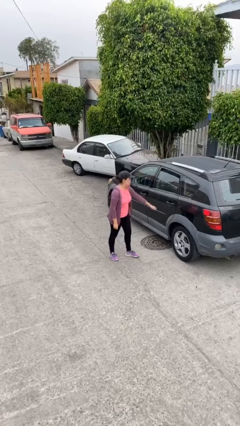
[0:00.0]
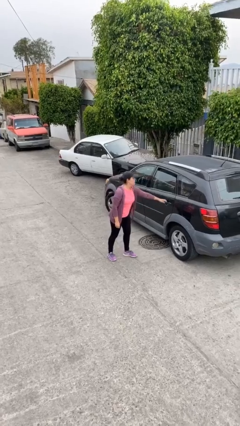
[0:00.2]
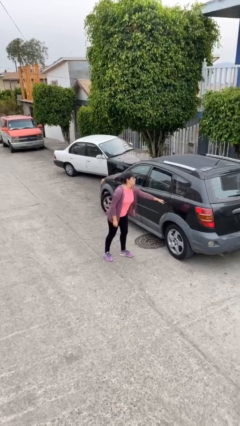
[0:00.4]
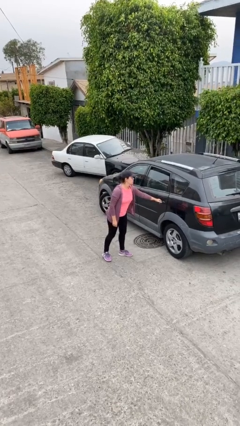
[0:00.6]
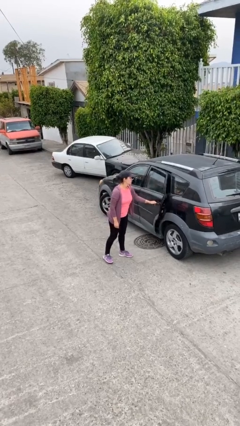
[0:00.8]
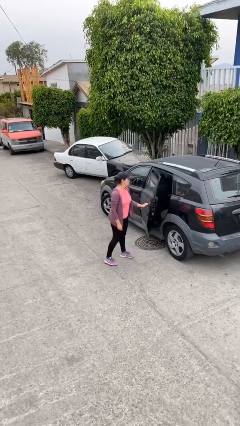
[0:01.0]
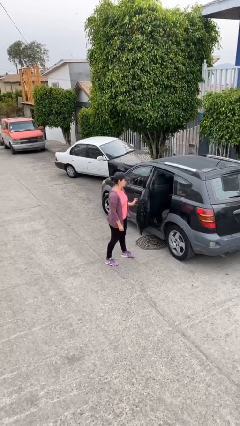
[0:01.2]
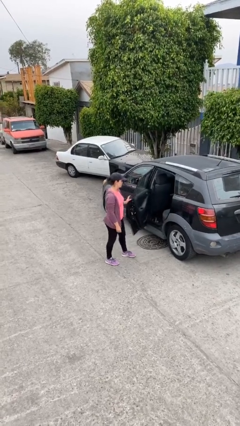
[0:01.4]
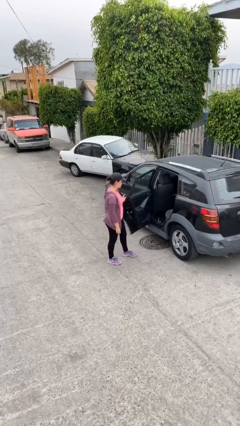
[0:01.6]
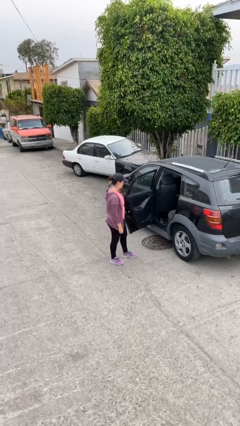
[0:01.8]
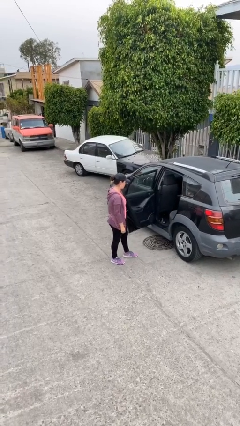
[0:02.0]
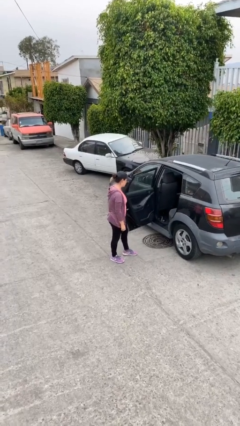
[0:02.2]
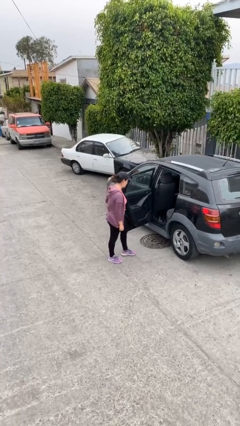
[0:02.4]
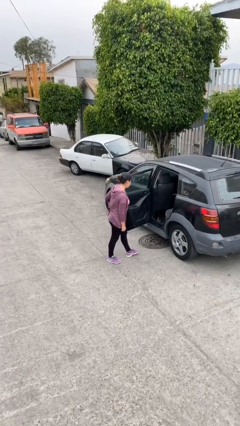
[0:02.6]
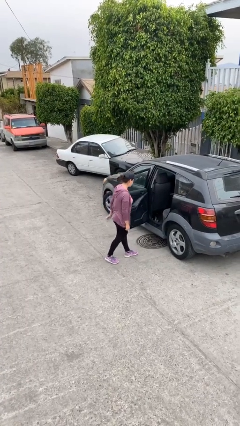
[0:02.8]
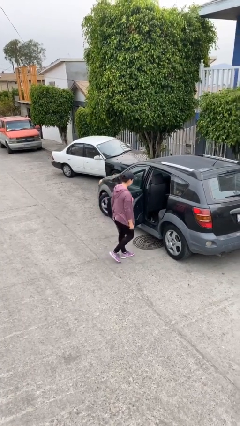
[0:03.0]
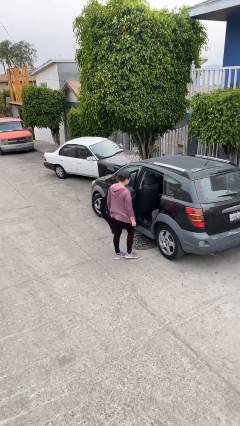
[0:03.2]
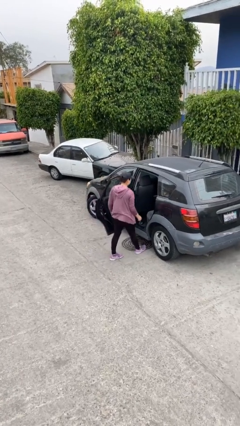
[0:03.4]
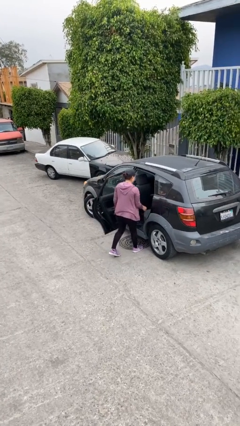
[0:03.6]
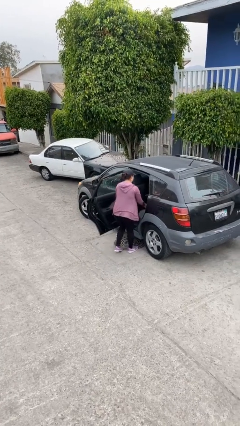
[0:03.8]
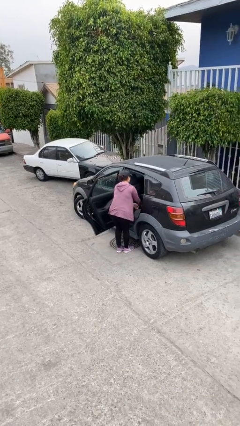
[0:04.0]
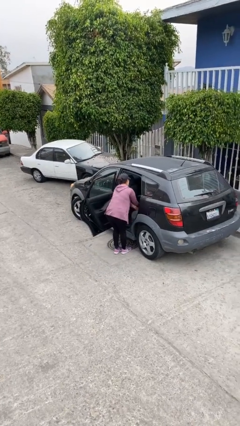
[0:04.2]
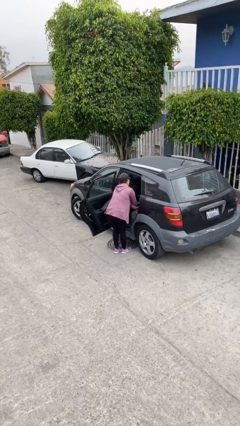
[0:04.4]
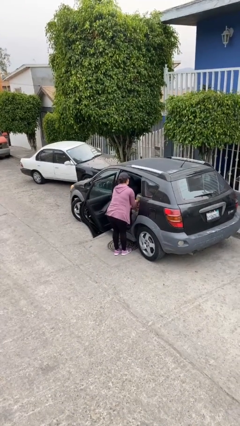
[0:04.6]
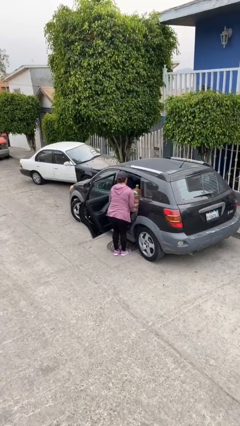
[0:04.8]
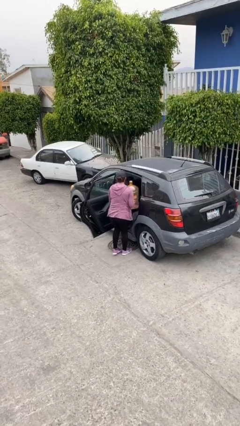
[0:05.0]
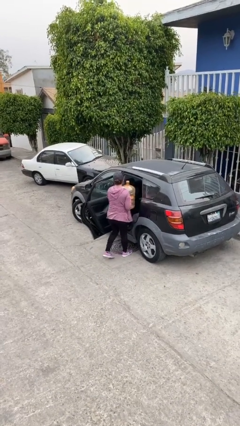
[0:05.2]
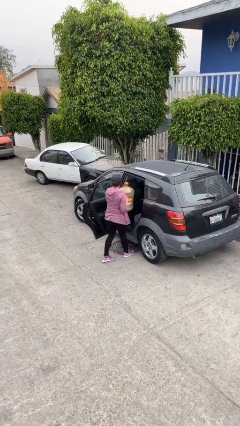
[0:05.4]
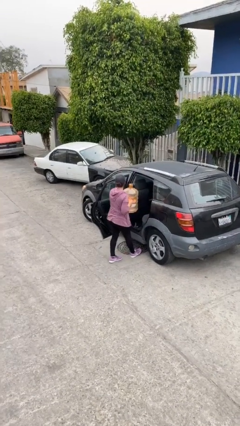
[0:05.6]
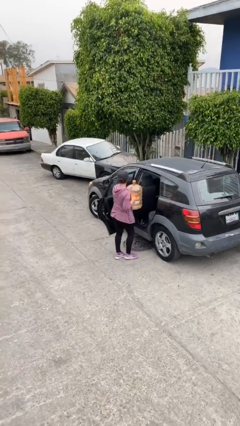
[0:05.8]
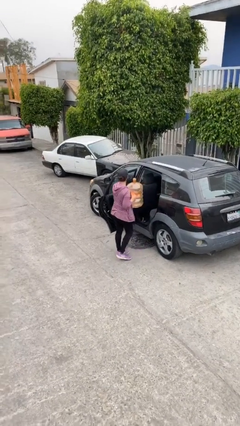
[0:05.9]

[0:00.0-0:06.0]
person opens car door

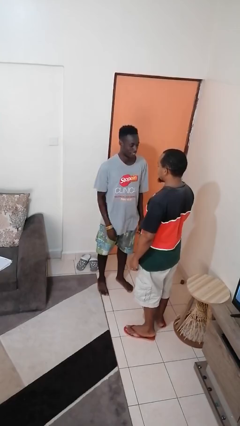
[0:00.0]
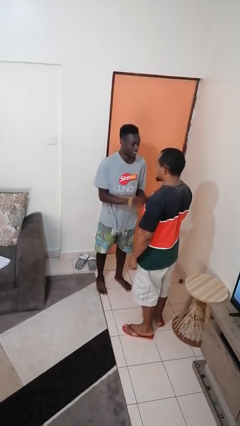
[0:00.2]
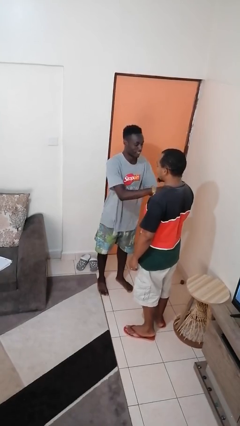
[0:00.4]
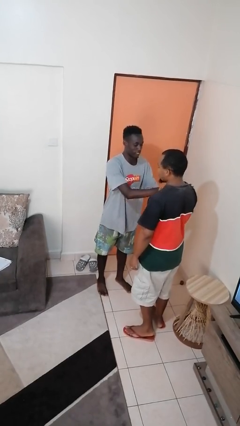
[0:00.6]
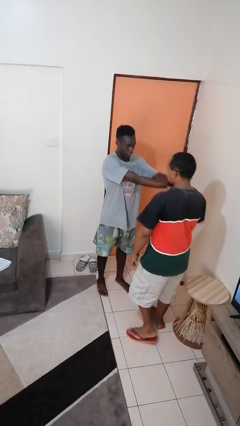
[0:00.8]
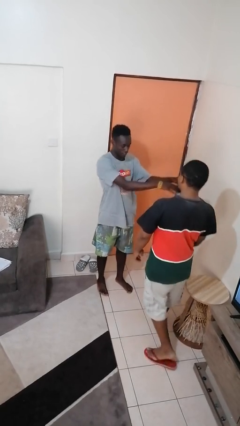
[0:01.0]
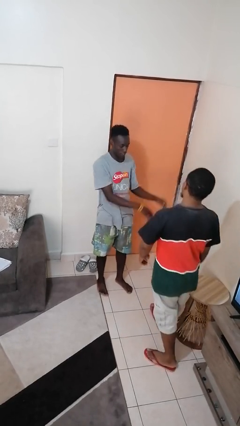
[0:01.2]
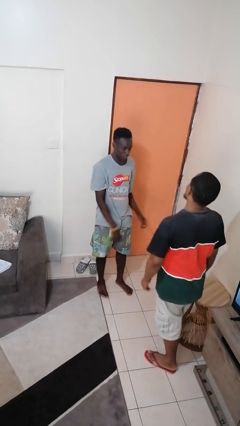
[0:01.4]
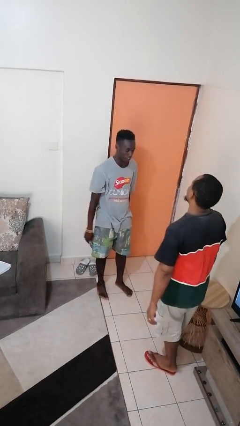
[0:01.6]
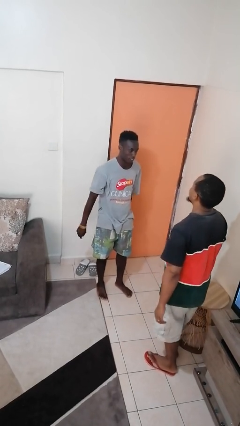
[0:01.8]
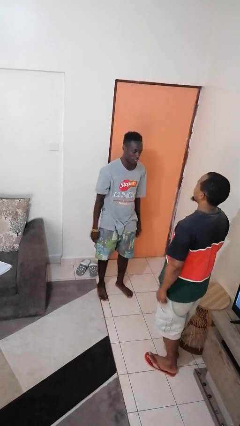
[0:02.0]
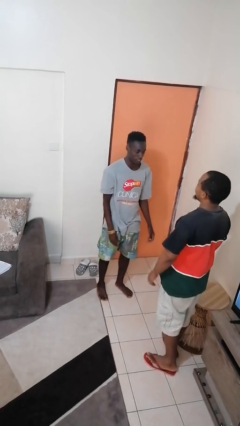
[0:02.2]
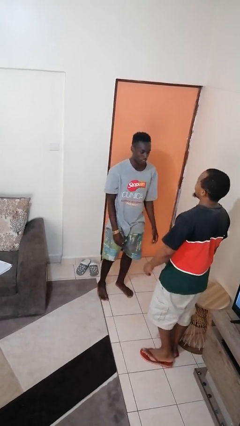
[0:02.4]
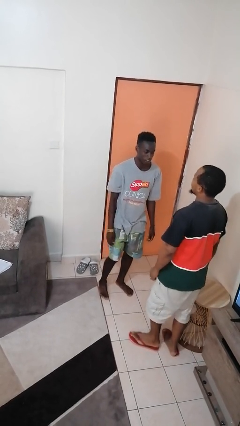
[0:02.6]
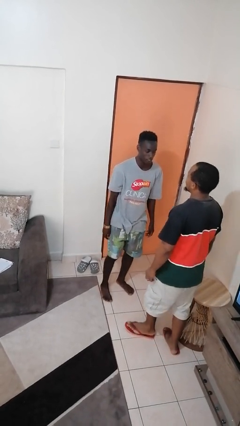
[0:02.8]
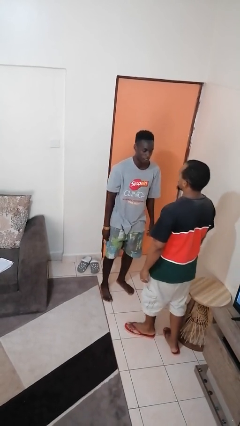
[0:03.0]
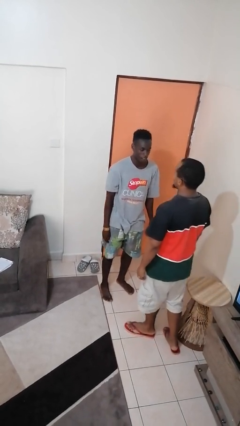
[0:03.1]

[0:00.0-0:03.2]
person shoves person

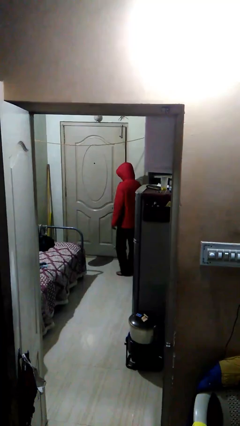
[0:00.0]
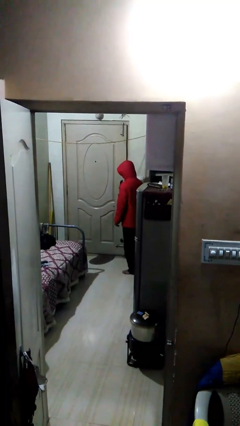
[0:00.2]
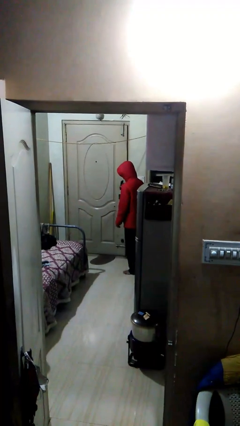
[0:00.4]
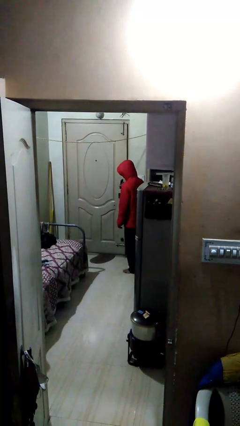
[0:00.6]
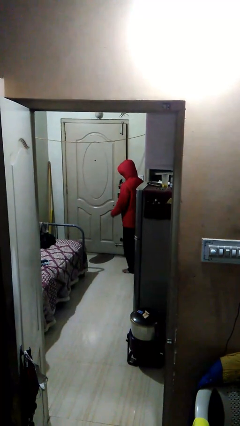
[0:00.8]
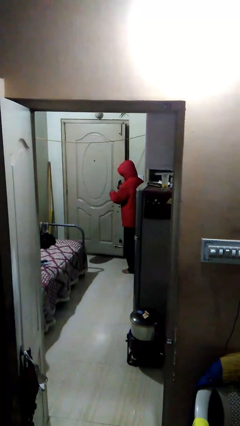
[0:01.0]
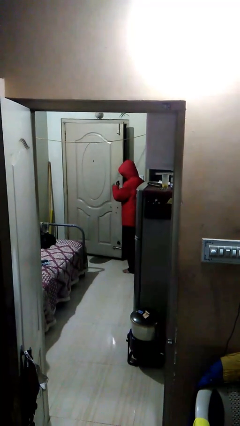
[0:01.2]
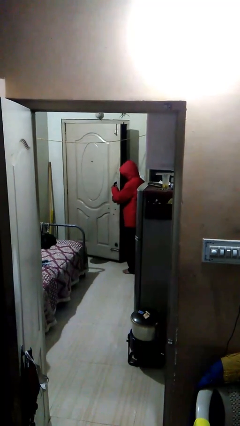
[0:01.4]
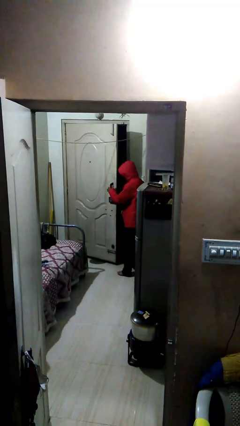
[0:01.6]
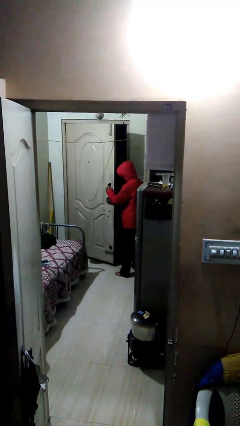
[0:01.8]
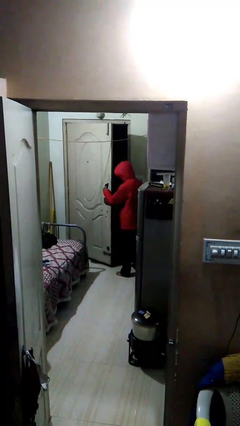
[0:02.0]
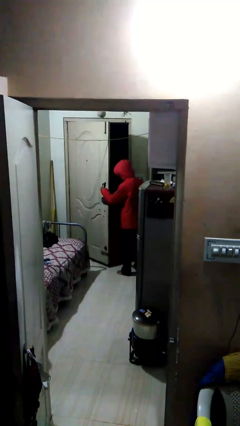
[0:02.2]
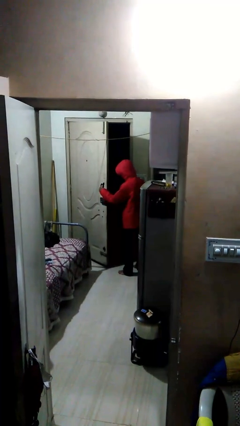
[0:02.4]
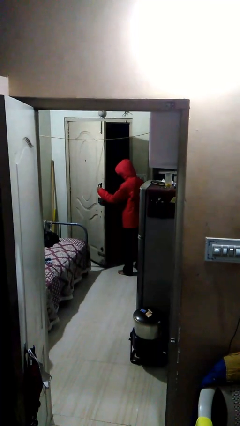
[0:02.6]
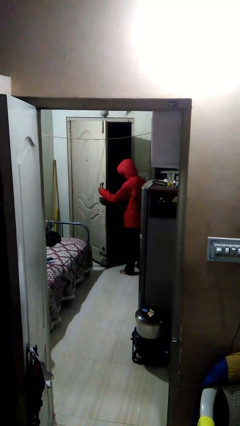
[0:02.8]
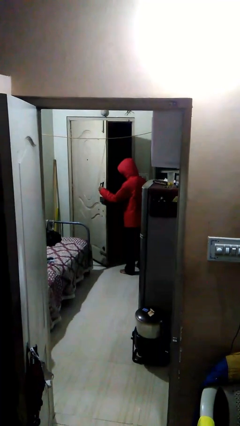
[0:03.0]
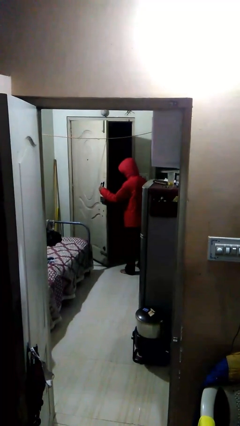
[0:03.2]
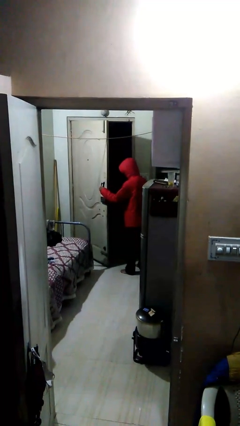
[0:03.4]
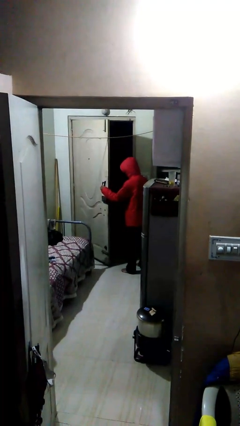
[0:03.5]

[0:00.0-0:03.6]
person opens facility door

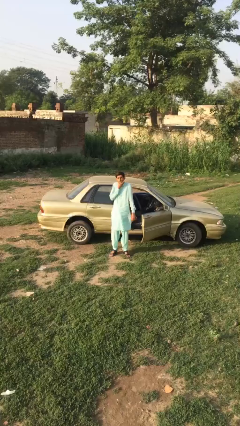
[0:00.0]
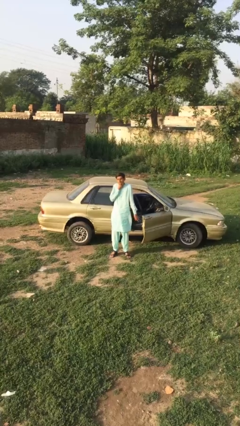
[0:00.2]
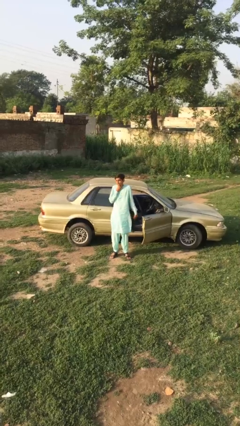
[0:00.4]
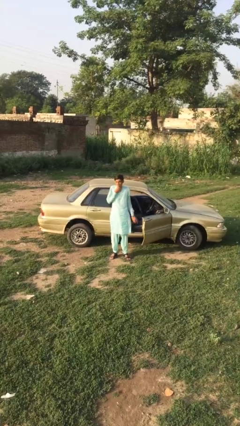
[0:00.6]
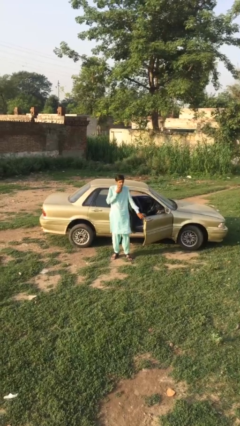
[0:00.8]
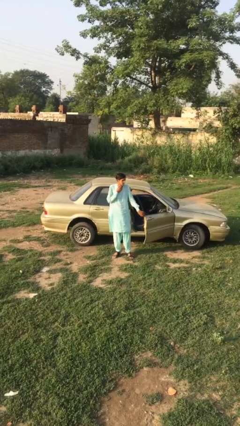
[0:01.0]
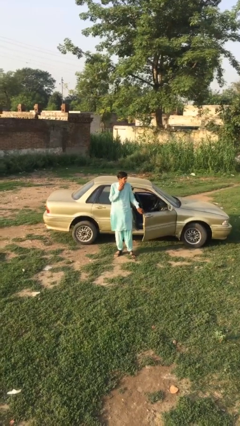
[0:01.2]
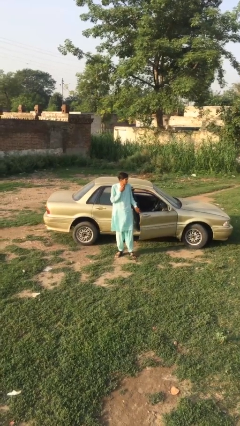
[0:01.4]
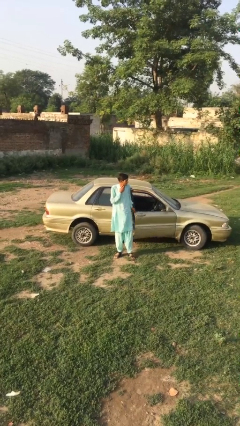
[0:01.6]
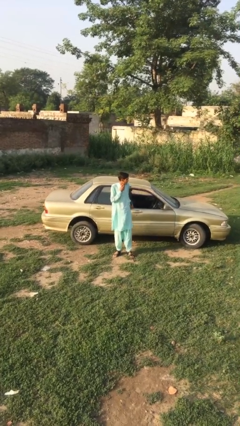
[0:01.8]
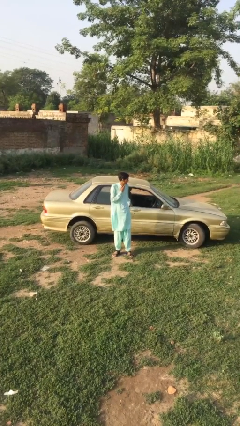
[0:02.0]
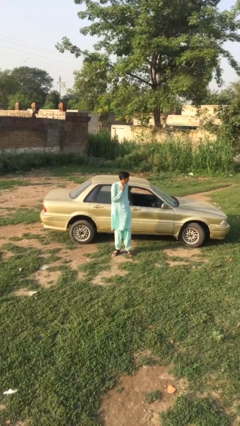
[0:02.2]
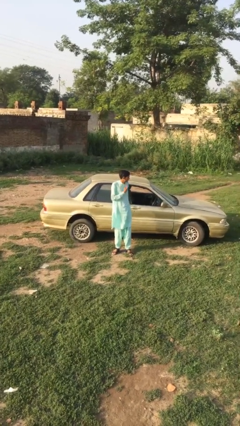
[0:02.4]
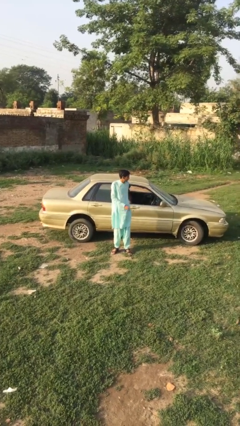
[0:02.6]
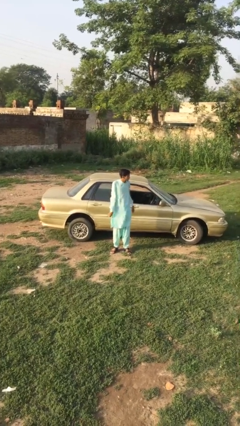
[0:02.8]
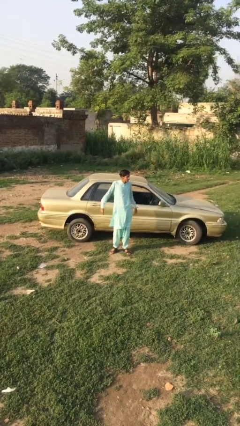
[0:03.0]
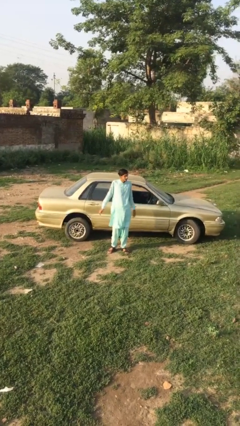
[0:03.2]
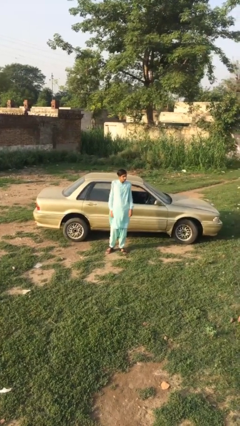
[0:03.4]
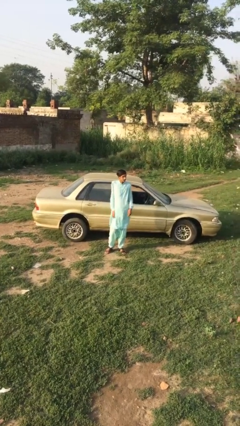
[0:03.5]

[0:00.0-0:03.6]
person closes car door

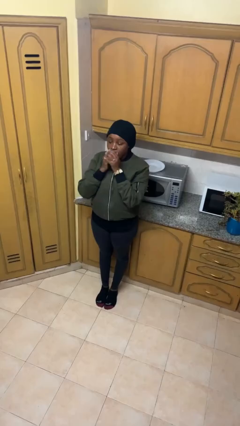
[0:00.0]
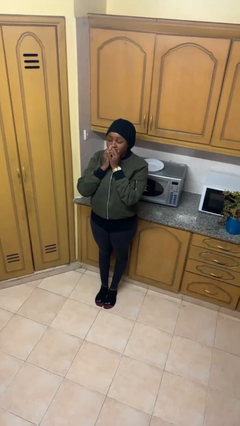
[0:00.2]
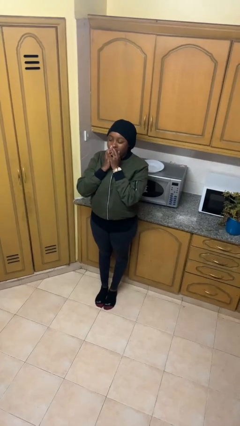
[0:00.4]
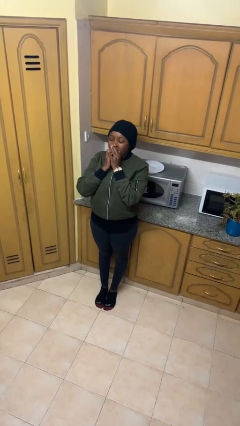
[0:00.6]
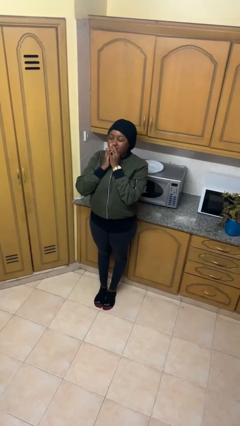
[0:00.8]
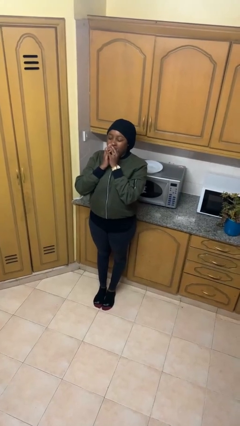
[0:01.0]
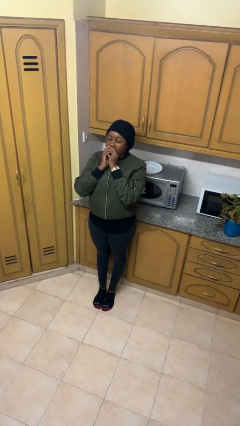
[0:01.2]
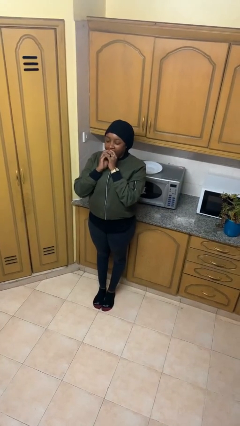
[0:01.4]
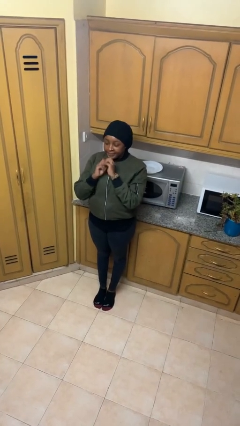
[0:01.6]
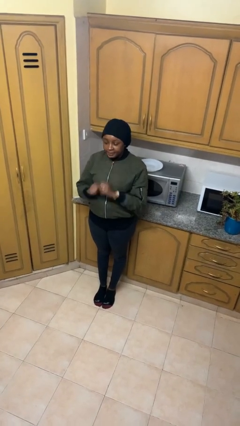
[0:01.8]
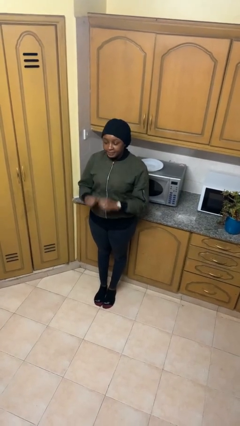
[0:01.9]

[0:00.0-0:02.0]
person yawns
